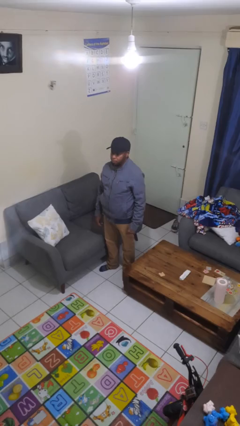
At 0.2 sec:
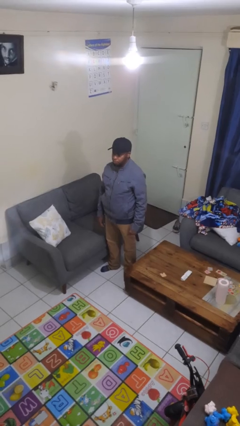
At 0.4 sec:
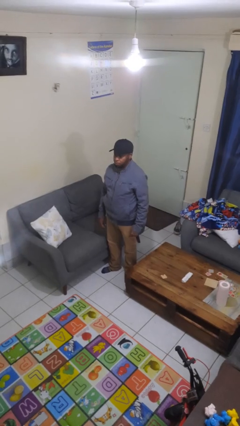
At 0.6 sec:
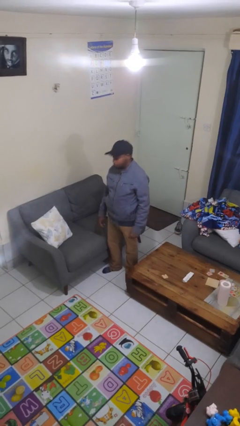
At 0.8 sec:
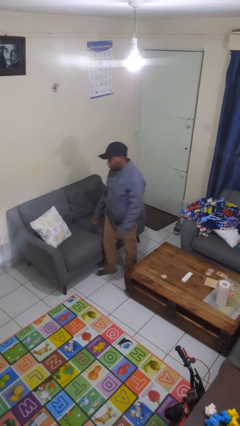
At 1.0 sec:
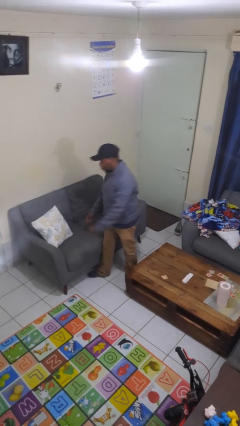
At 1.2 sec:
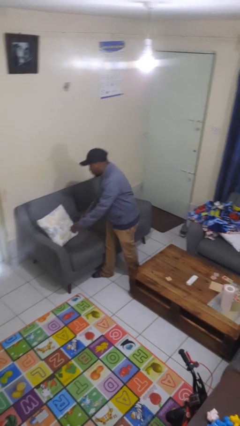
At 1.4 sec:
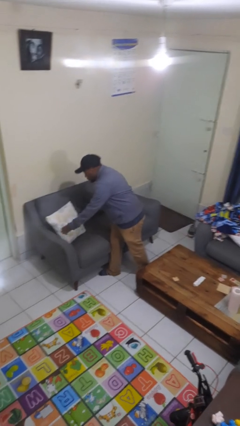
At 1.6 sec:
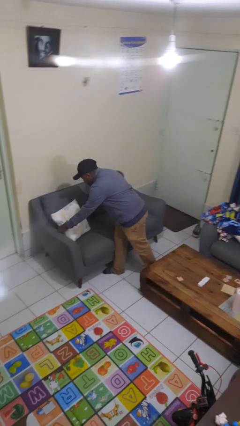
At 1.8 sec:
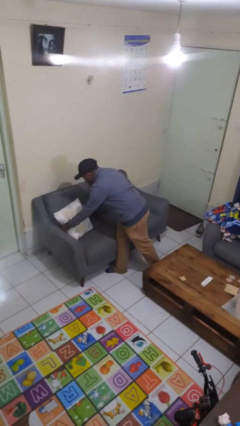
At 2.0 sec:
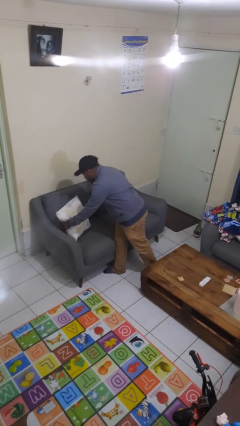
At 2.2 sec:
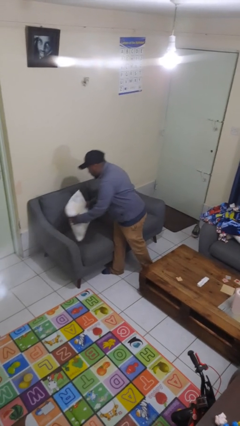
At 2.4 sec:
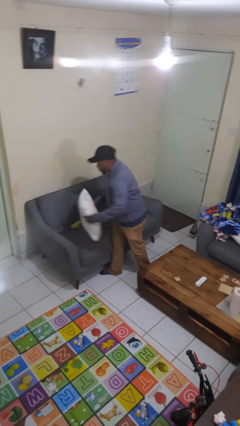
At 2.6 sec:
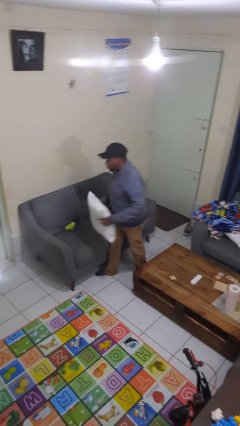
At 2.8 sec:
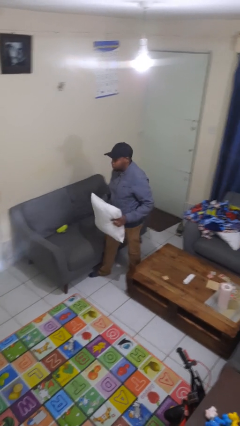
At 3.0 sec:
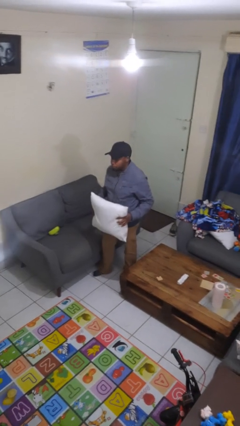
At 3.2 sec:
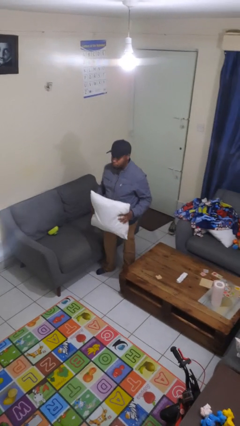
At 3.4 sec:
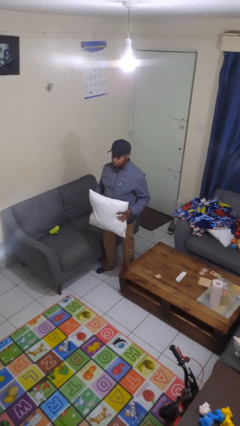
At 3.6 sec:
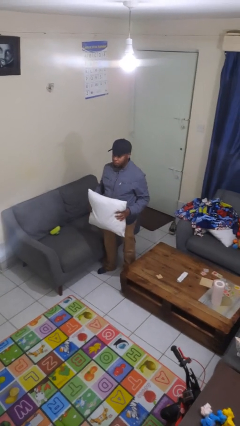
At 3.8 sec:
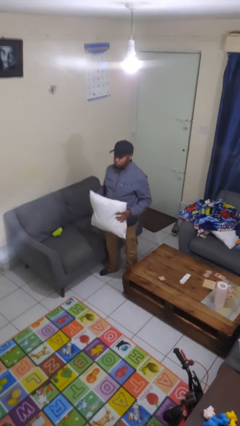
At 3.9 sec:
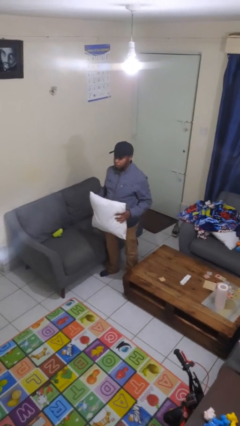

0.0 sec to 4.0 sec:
person picks up object from couch

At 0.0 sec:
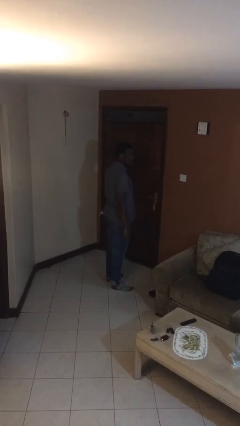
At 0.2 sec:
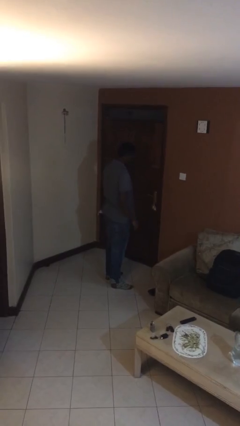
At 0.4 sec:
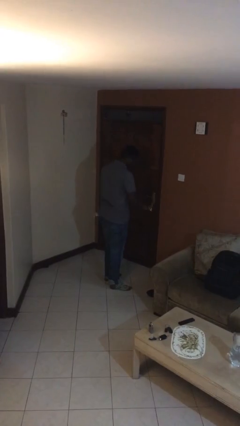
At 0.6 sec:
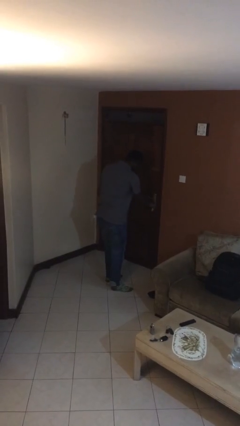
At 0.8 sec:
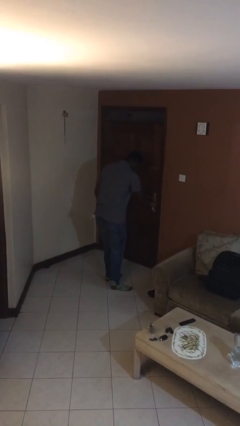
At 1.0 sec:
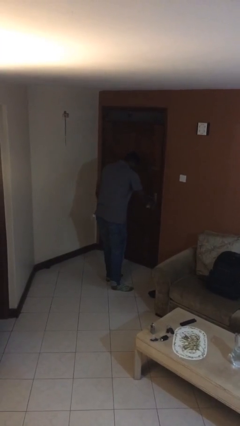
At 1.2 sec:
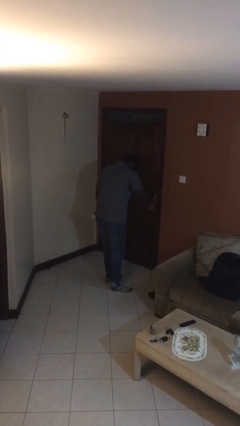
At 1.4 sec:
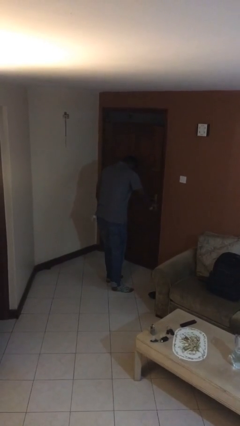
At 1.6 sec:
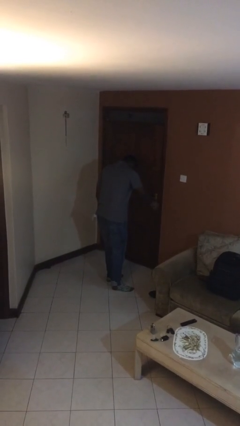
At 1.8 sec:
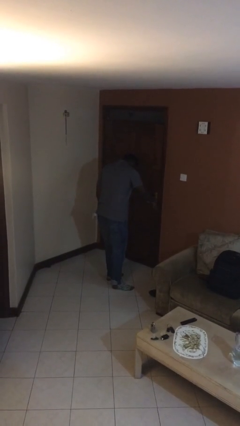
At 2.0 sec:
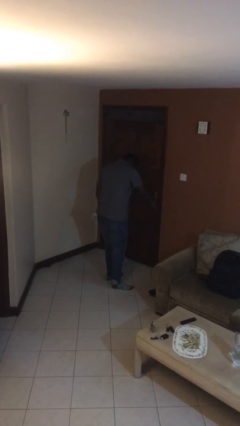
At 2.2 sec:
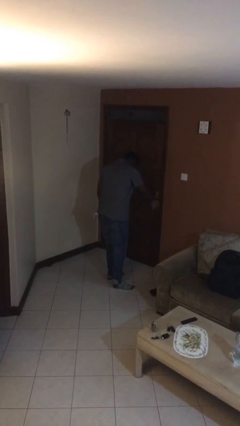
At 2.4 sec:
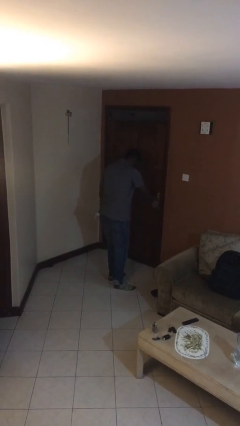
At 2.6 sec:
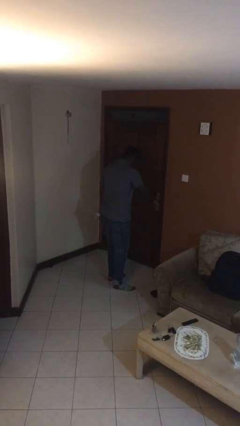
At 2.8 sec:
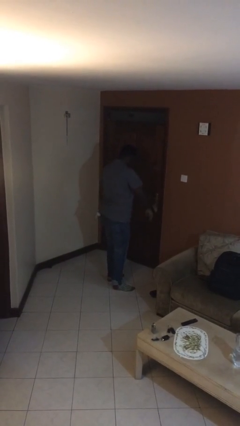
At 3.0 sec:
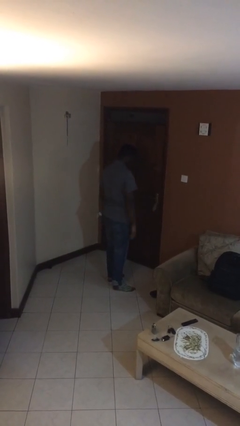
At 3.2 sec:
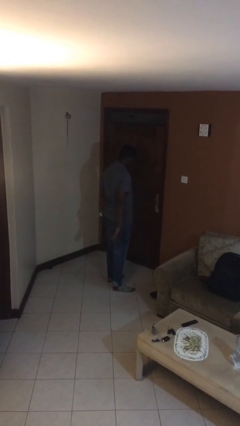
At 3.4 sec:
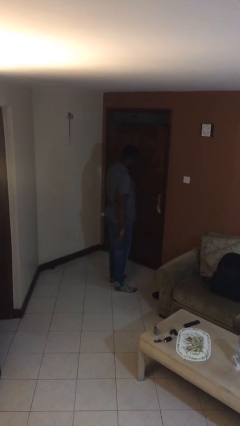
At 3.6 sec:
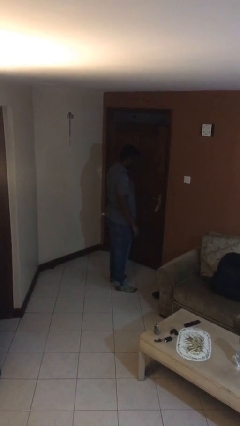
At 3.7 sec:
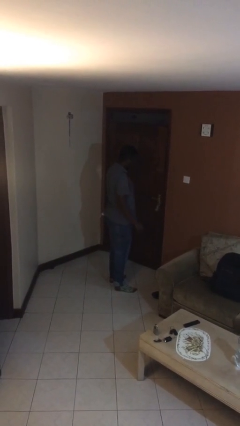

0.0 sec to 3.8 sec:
person unlocks door with keys

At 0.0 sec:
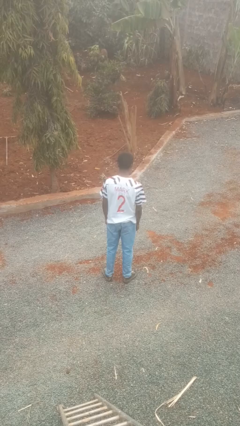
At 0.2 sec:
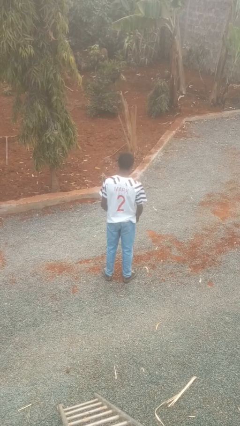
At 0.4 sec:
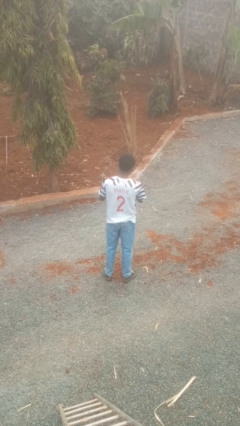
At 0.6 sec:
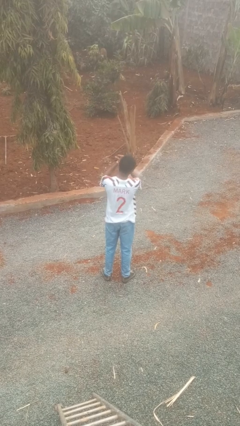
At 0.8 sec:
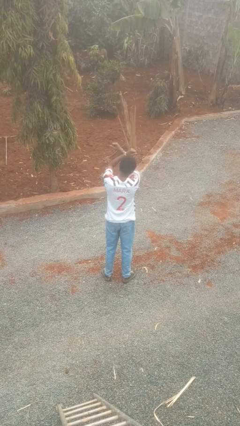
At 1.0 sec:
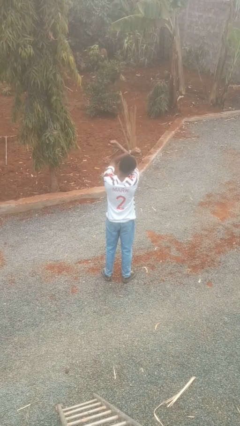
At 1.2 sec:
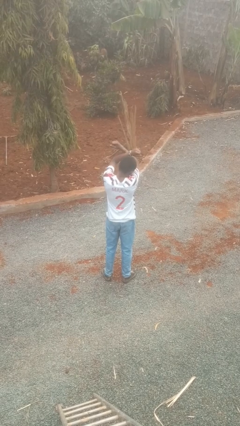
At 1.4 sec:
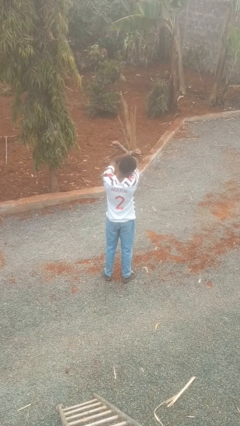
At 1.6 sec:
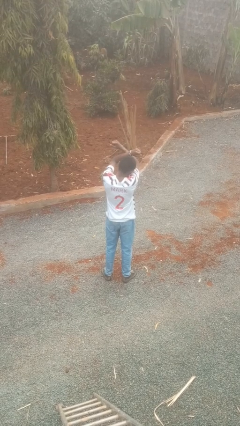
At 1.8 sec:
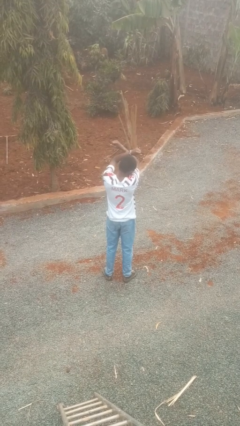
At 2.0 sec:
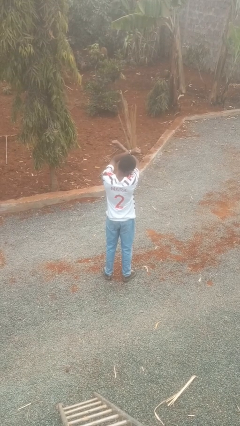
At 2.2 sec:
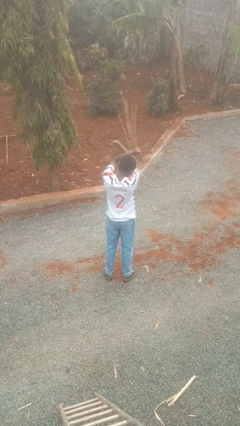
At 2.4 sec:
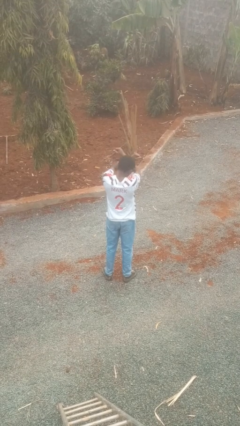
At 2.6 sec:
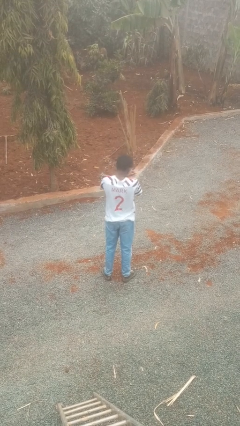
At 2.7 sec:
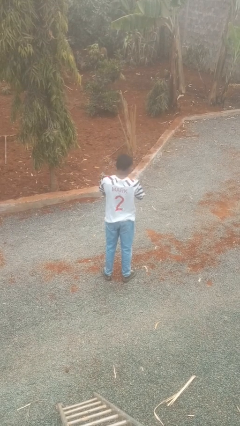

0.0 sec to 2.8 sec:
person gestures arms x

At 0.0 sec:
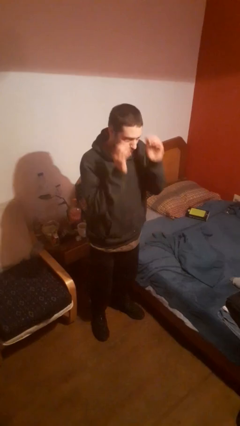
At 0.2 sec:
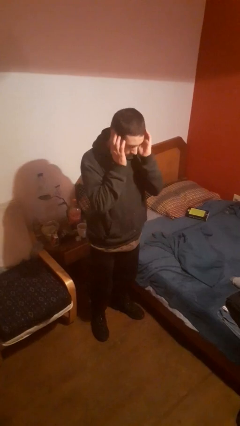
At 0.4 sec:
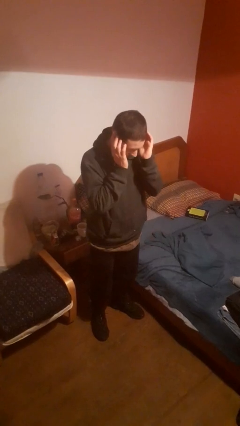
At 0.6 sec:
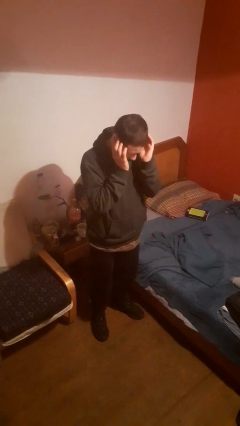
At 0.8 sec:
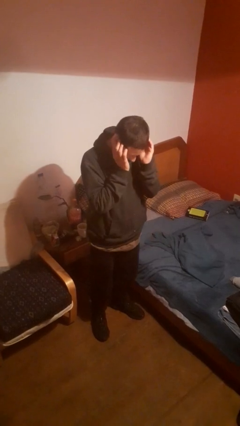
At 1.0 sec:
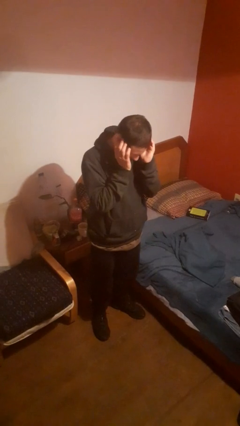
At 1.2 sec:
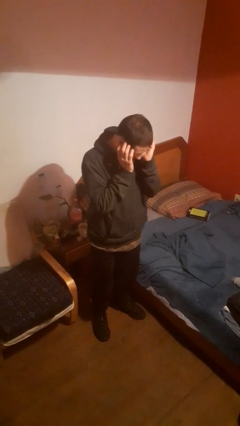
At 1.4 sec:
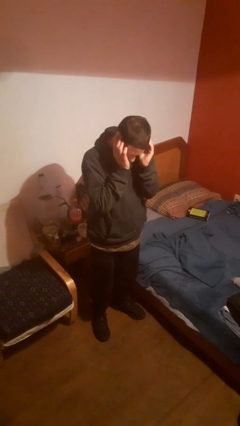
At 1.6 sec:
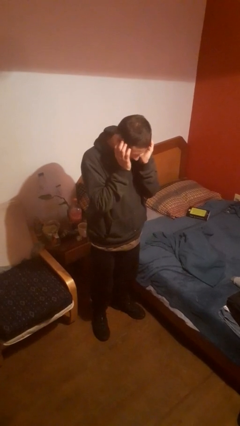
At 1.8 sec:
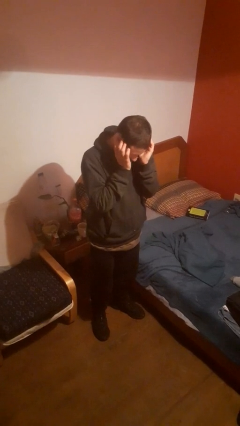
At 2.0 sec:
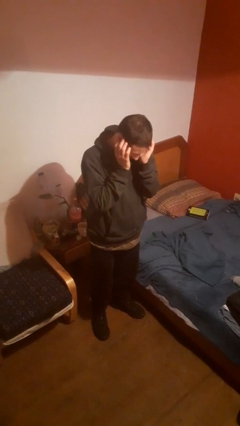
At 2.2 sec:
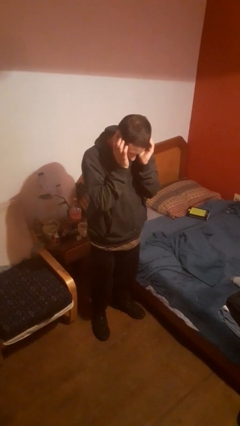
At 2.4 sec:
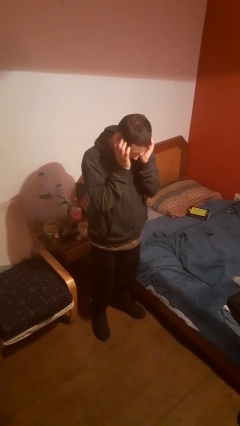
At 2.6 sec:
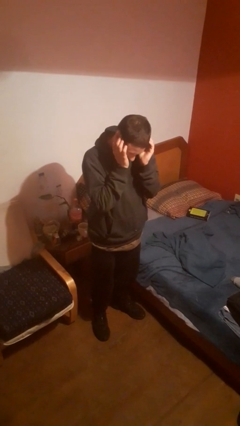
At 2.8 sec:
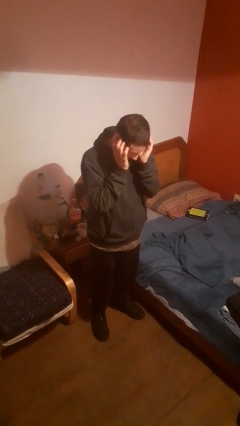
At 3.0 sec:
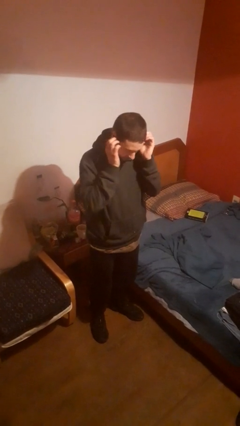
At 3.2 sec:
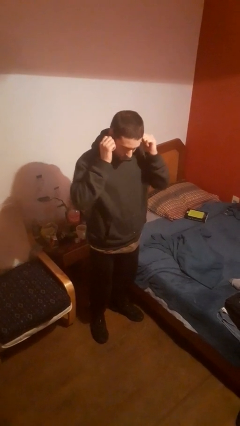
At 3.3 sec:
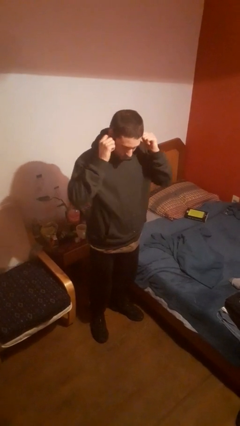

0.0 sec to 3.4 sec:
person puts fingers in ear

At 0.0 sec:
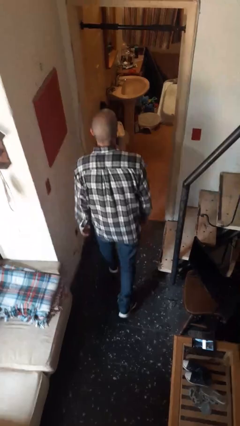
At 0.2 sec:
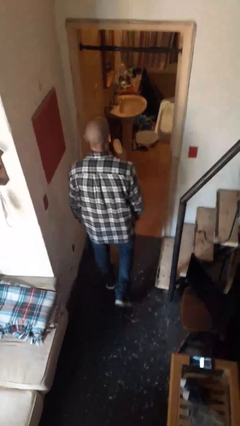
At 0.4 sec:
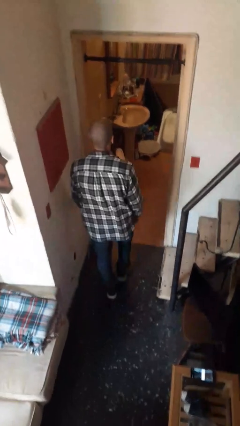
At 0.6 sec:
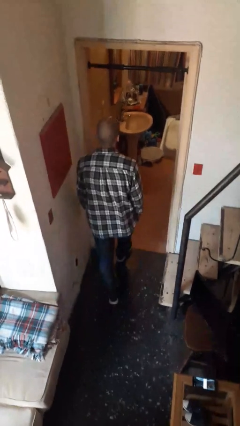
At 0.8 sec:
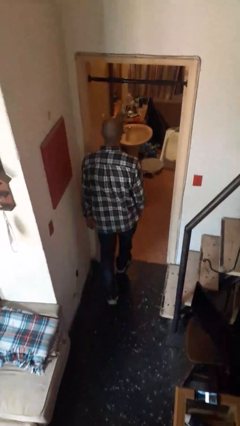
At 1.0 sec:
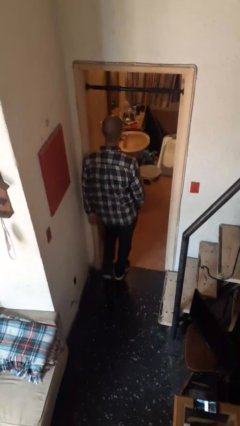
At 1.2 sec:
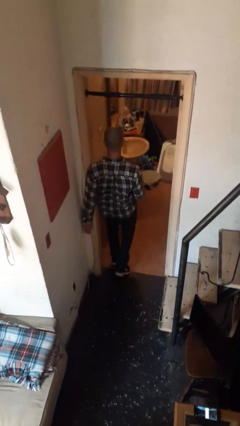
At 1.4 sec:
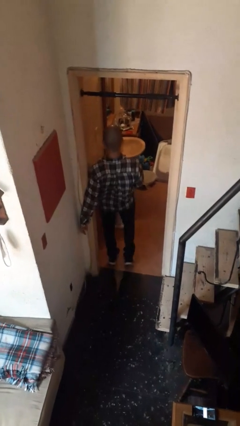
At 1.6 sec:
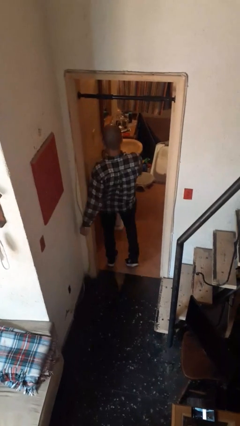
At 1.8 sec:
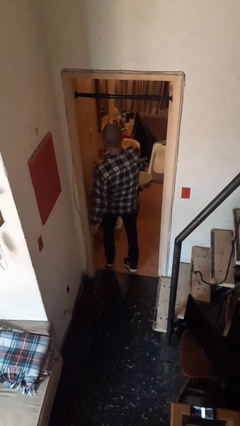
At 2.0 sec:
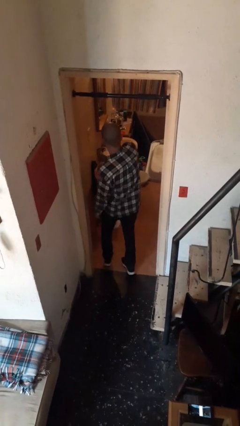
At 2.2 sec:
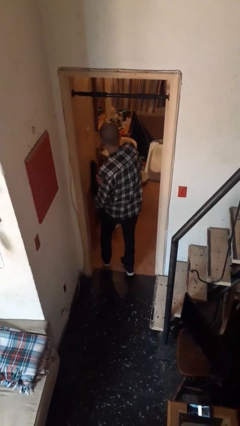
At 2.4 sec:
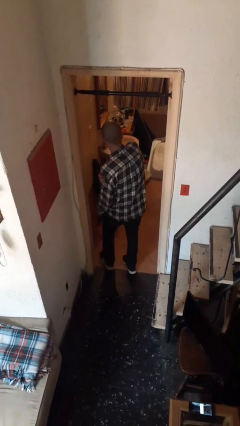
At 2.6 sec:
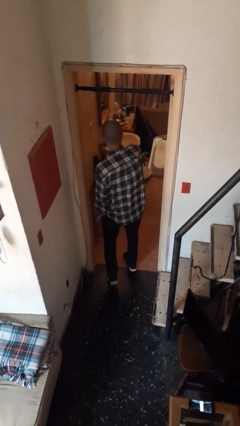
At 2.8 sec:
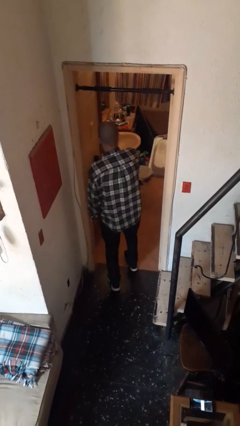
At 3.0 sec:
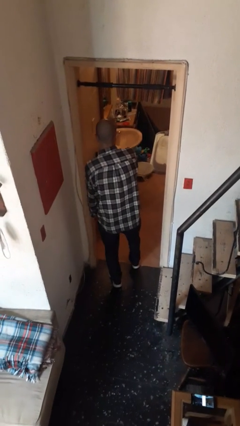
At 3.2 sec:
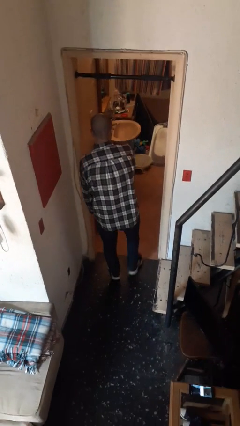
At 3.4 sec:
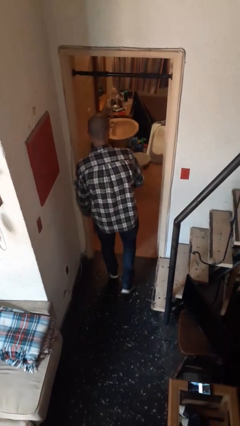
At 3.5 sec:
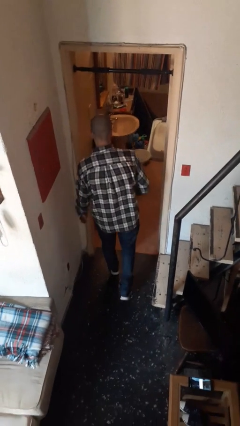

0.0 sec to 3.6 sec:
person bumps into wall
